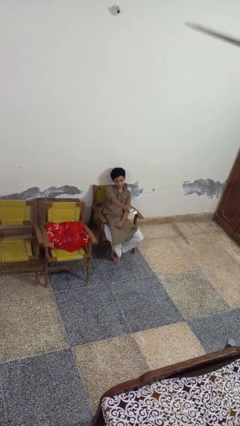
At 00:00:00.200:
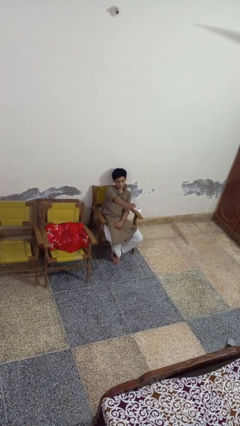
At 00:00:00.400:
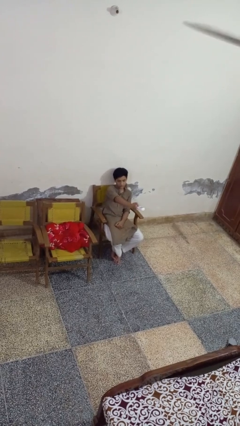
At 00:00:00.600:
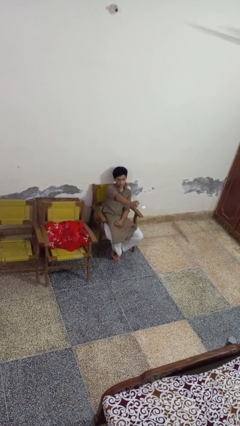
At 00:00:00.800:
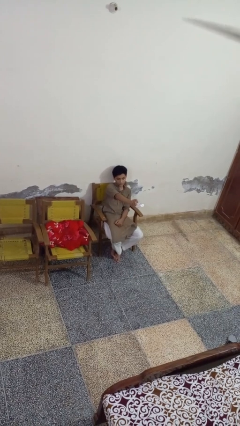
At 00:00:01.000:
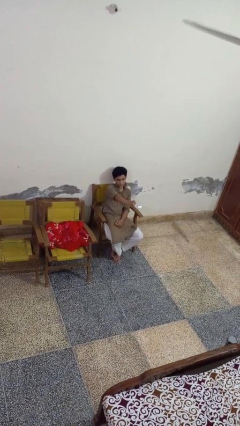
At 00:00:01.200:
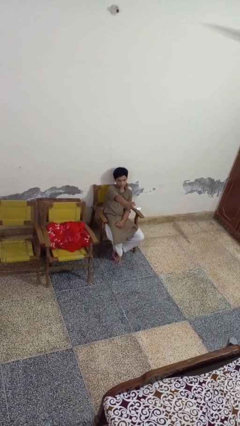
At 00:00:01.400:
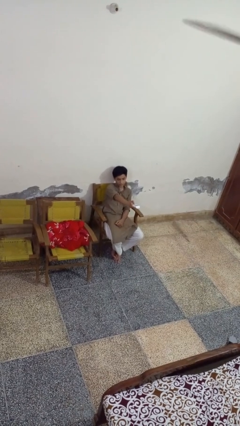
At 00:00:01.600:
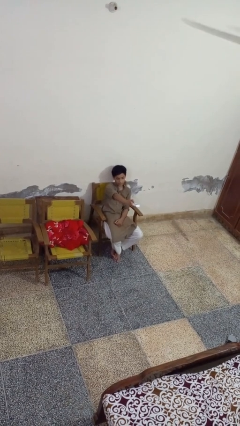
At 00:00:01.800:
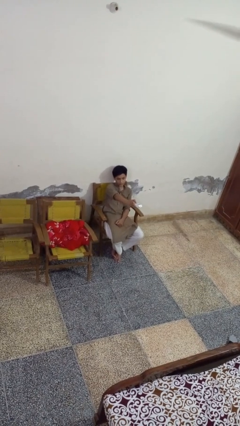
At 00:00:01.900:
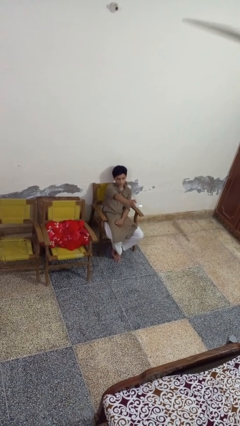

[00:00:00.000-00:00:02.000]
person uses television remote

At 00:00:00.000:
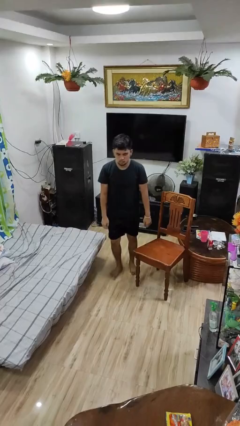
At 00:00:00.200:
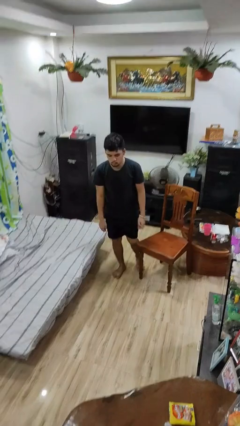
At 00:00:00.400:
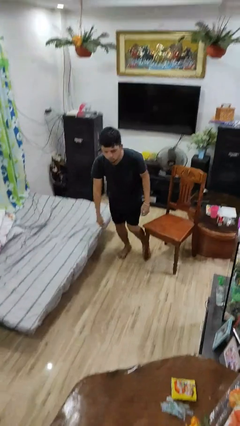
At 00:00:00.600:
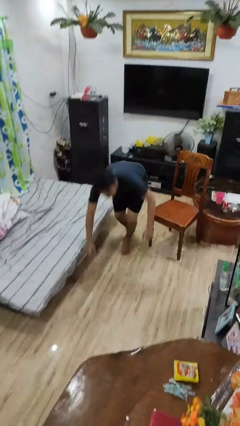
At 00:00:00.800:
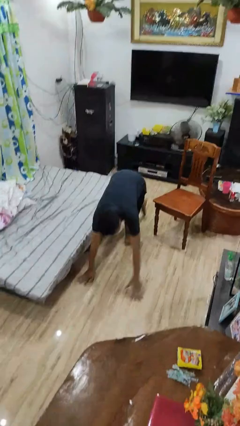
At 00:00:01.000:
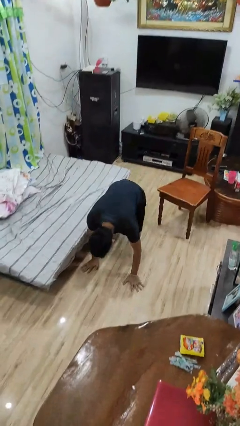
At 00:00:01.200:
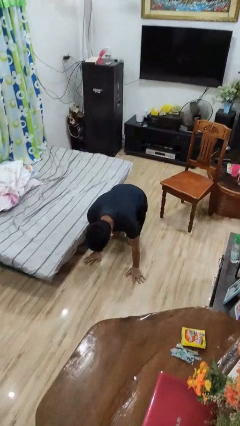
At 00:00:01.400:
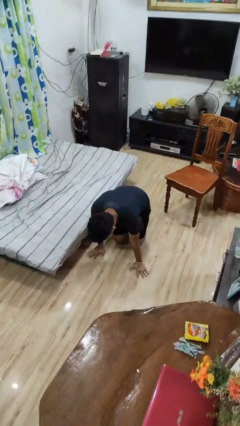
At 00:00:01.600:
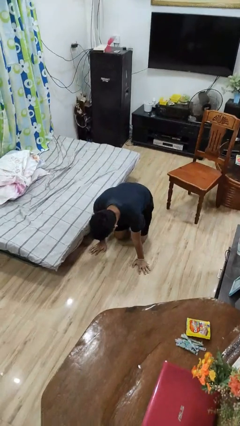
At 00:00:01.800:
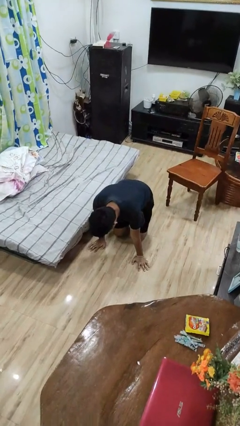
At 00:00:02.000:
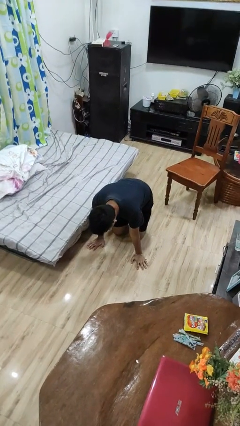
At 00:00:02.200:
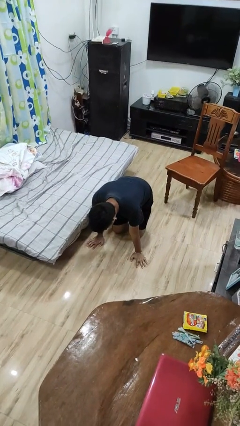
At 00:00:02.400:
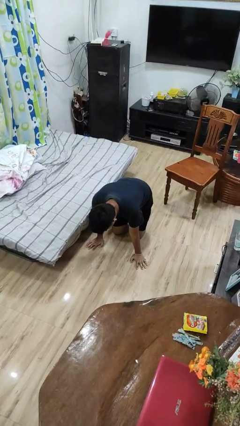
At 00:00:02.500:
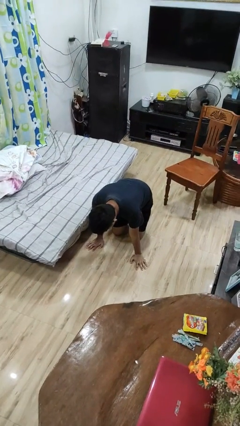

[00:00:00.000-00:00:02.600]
person trips on object on floor

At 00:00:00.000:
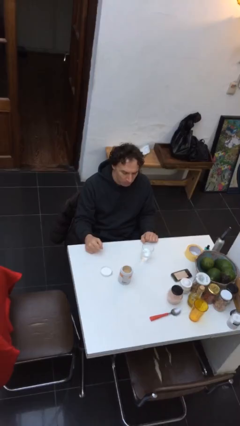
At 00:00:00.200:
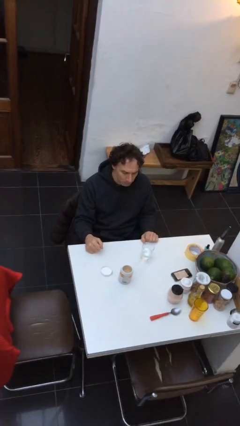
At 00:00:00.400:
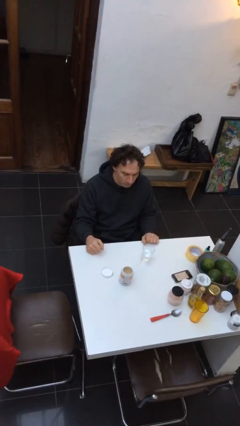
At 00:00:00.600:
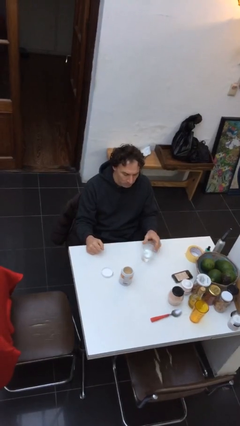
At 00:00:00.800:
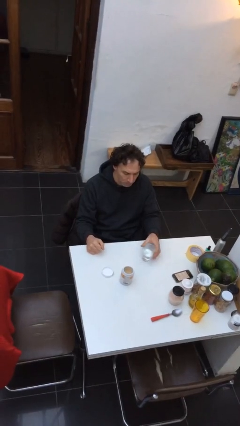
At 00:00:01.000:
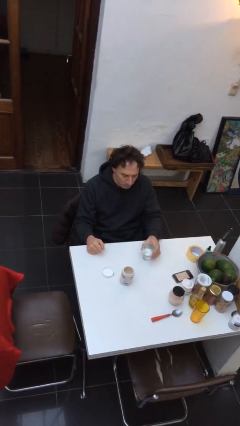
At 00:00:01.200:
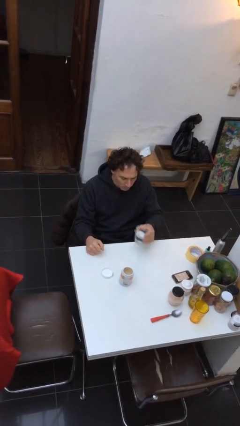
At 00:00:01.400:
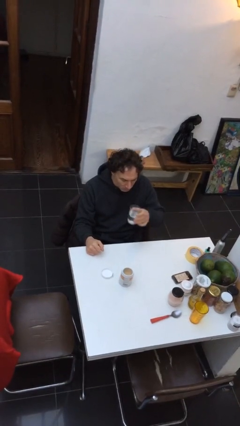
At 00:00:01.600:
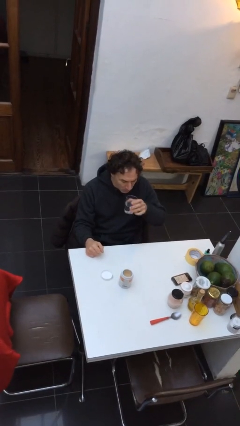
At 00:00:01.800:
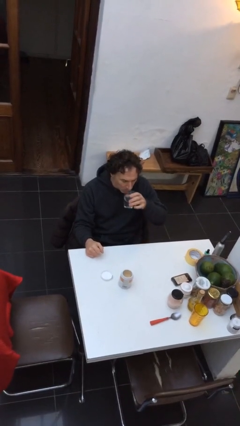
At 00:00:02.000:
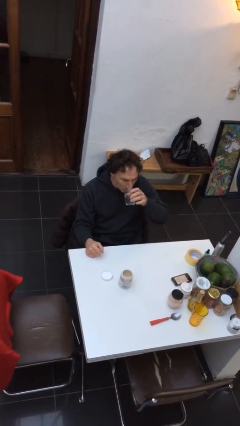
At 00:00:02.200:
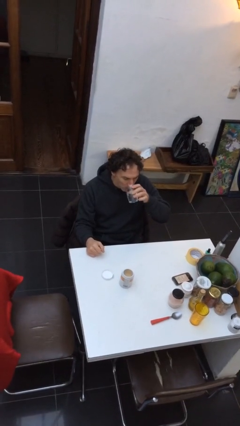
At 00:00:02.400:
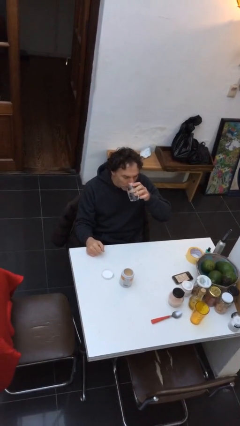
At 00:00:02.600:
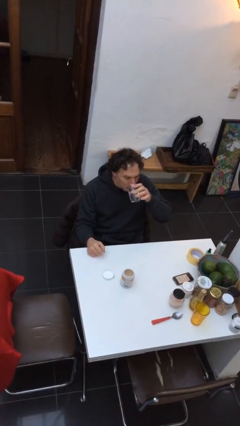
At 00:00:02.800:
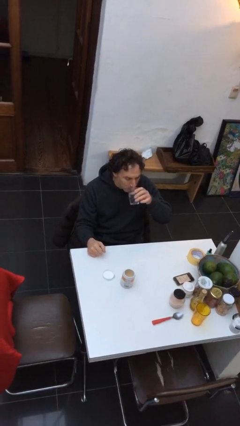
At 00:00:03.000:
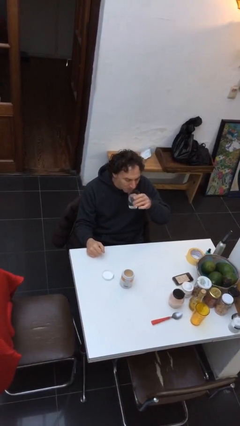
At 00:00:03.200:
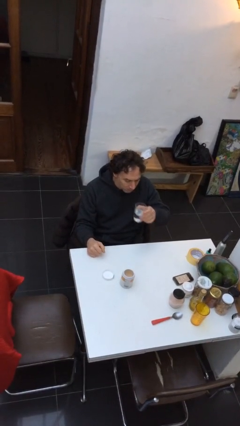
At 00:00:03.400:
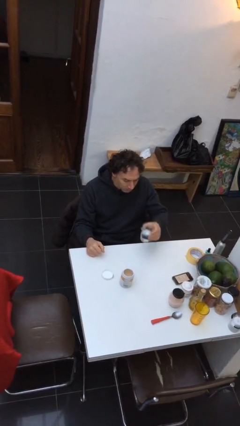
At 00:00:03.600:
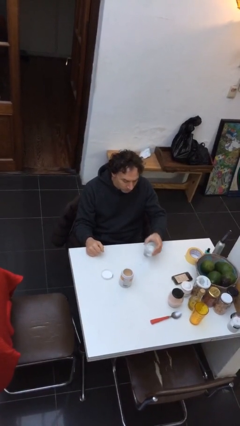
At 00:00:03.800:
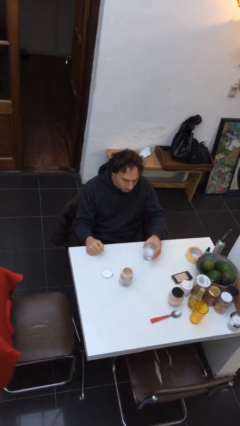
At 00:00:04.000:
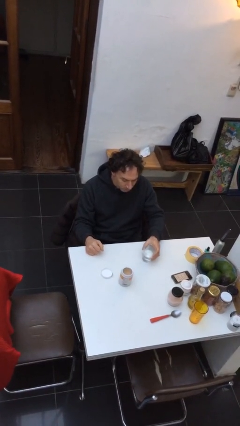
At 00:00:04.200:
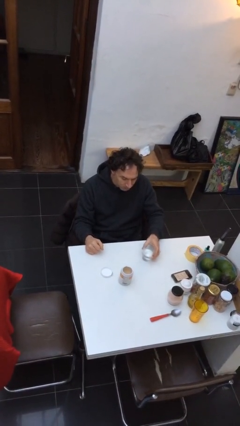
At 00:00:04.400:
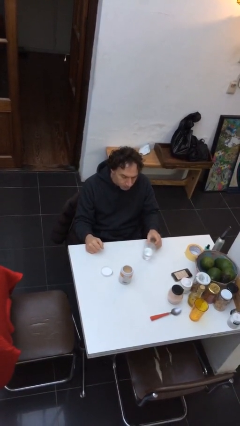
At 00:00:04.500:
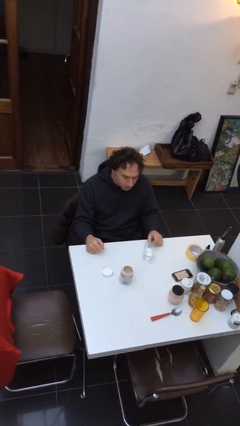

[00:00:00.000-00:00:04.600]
person drinks from cup

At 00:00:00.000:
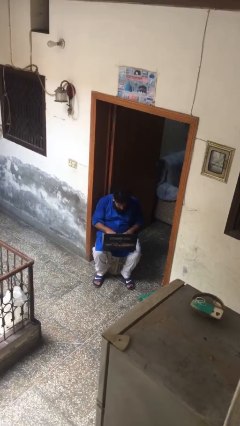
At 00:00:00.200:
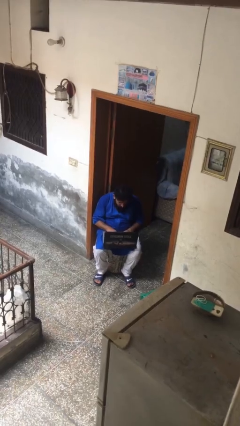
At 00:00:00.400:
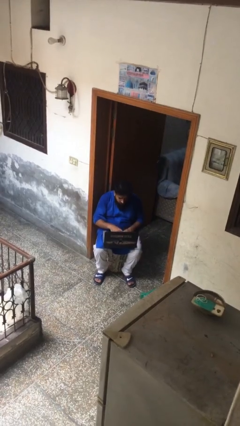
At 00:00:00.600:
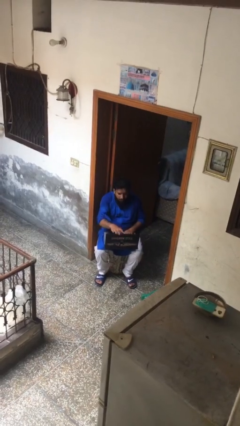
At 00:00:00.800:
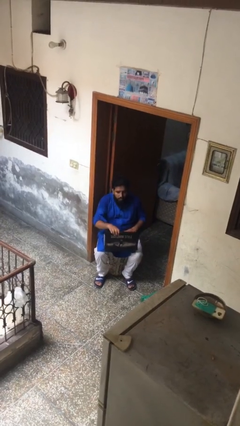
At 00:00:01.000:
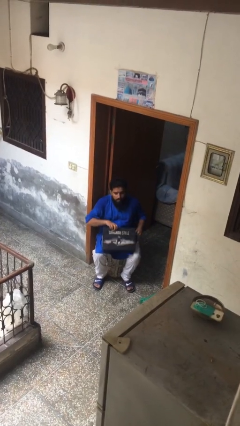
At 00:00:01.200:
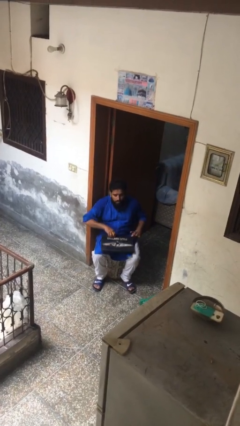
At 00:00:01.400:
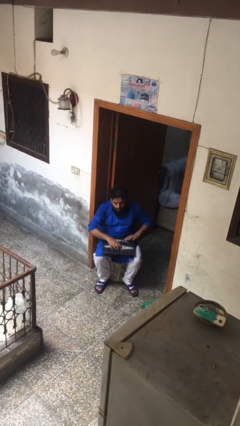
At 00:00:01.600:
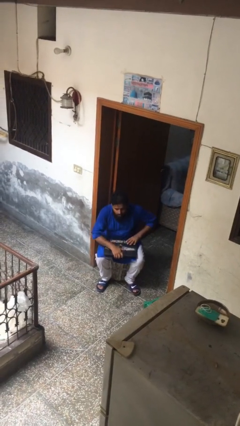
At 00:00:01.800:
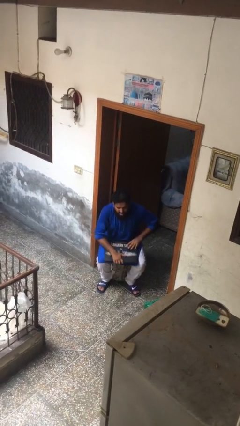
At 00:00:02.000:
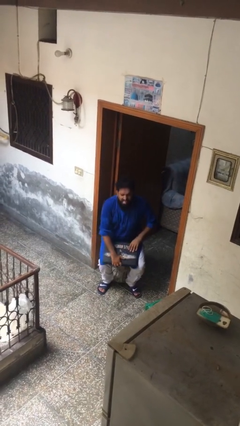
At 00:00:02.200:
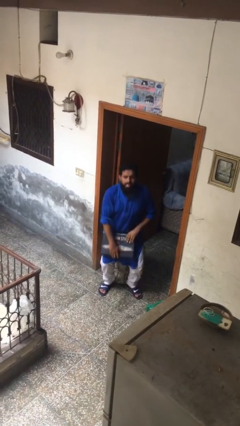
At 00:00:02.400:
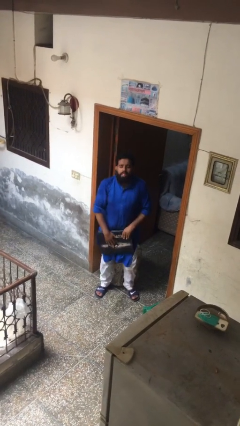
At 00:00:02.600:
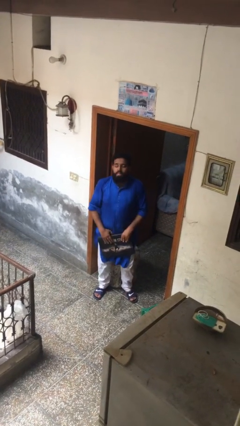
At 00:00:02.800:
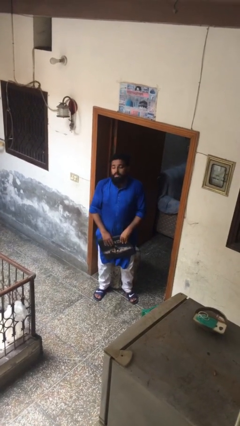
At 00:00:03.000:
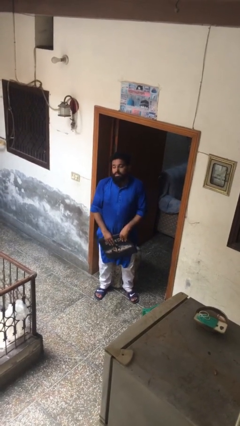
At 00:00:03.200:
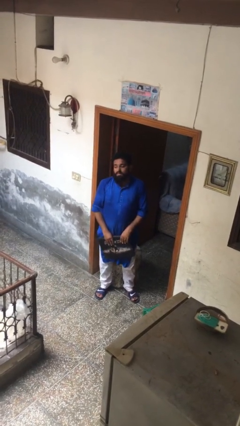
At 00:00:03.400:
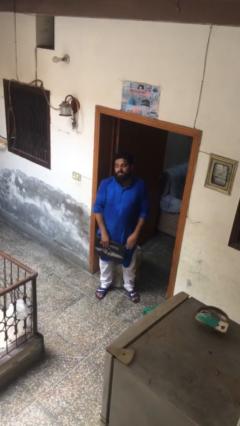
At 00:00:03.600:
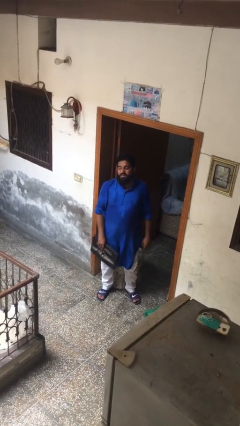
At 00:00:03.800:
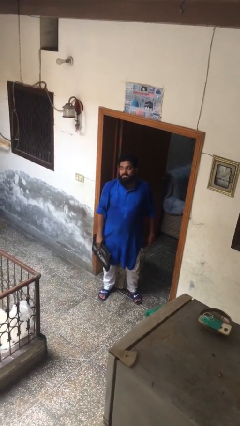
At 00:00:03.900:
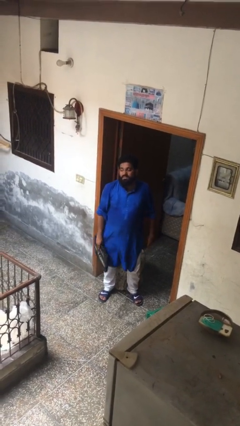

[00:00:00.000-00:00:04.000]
person stands up

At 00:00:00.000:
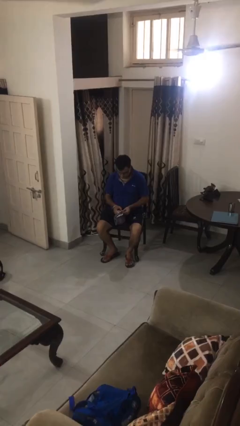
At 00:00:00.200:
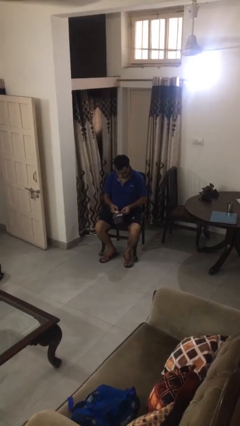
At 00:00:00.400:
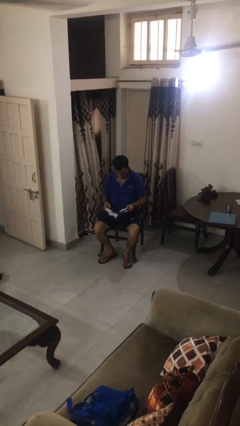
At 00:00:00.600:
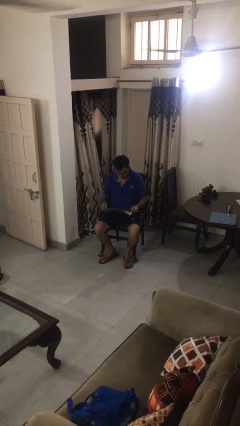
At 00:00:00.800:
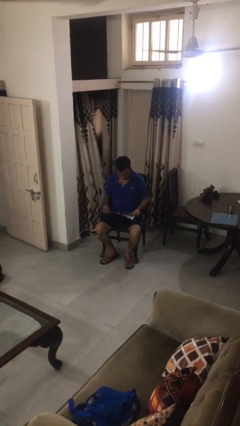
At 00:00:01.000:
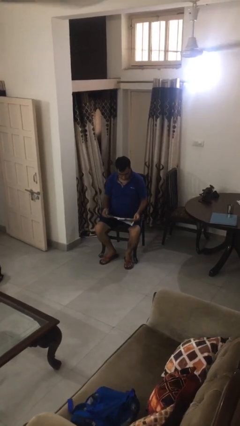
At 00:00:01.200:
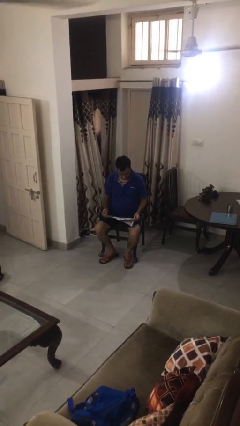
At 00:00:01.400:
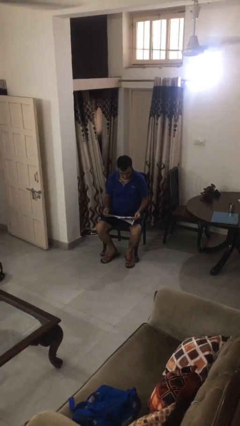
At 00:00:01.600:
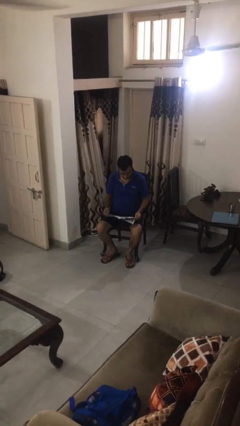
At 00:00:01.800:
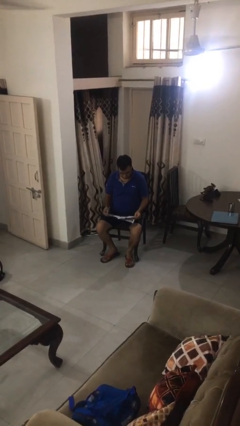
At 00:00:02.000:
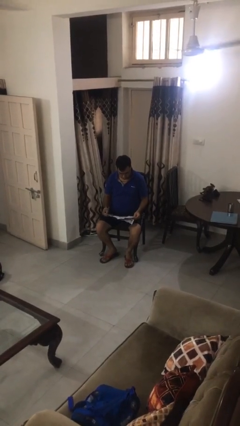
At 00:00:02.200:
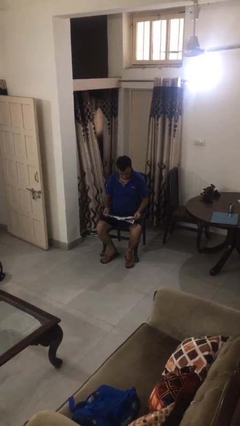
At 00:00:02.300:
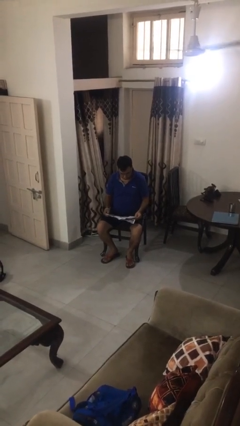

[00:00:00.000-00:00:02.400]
person reads magazine

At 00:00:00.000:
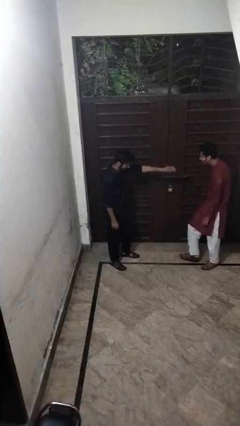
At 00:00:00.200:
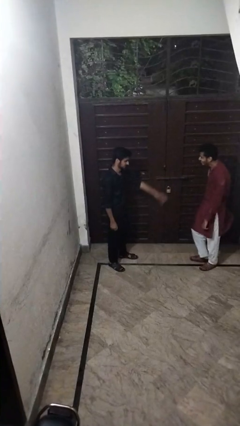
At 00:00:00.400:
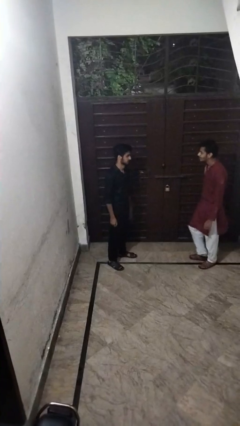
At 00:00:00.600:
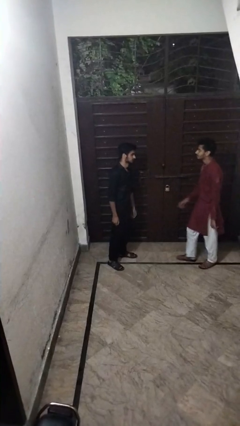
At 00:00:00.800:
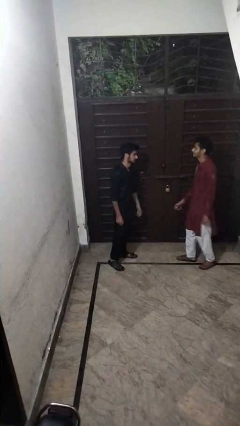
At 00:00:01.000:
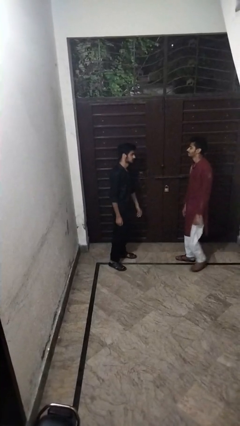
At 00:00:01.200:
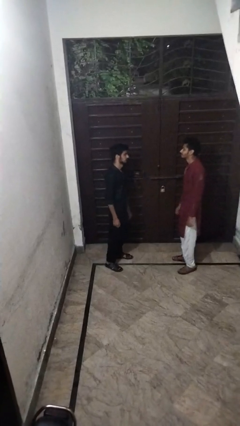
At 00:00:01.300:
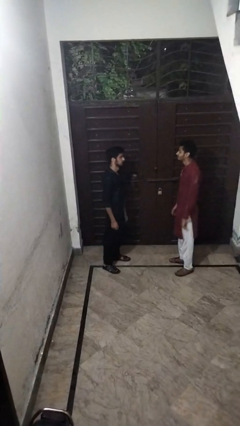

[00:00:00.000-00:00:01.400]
person shoves person

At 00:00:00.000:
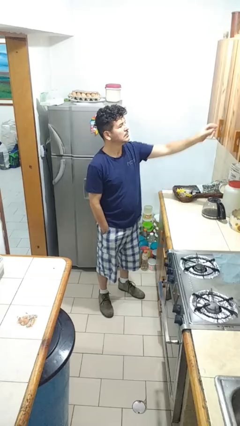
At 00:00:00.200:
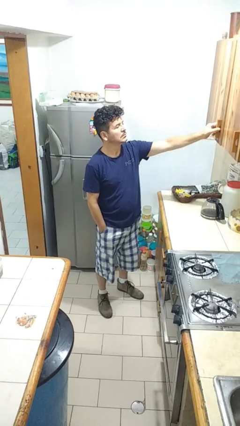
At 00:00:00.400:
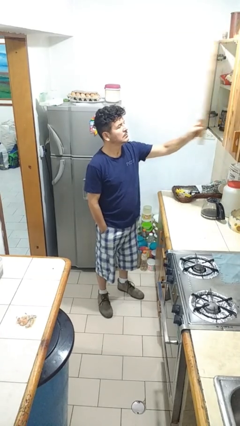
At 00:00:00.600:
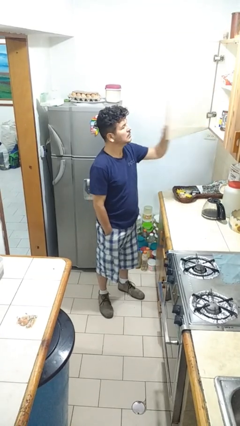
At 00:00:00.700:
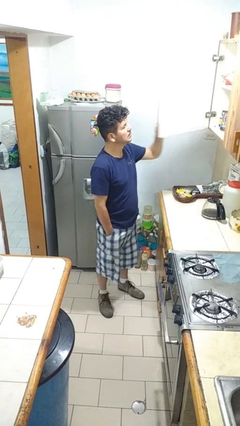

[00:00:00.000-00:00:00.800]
person opens cabinet
